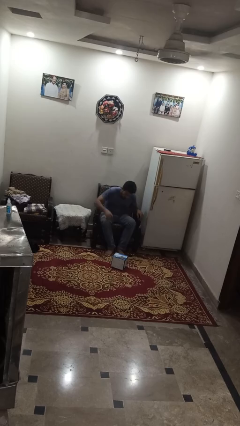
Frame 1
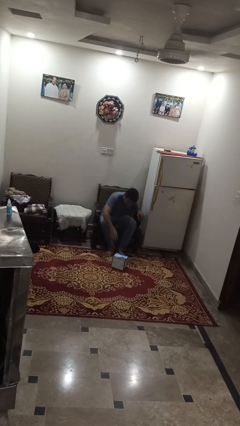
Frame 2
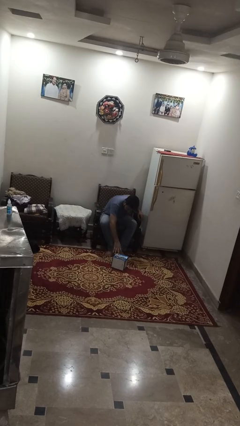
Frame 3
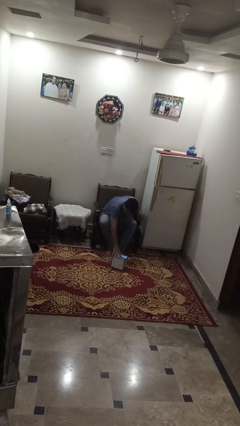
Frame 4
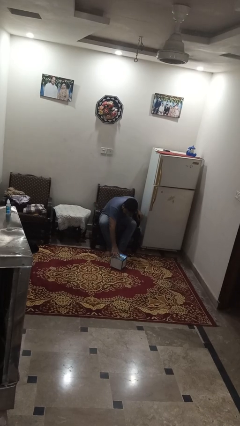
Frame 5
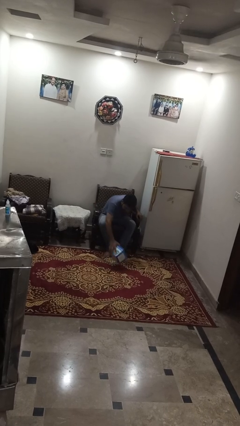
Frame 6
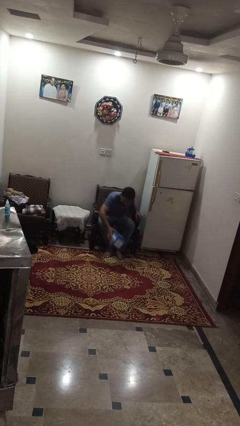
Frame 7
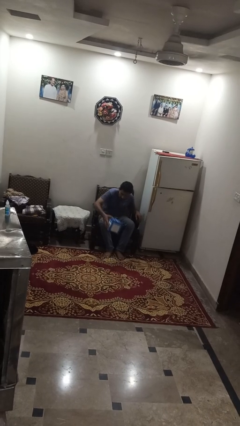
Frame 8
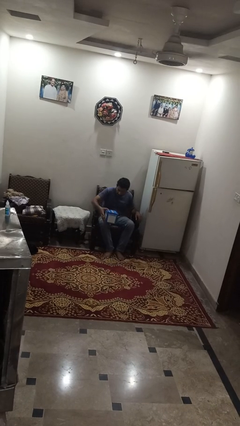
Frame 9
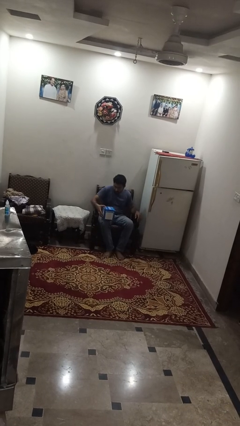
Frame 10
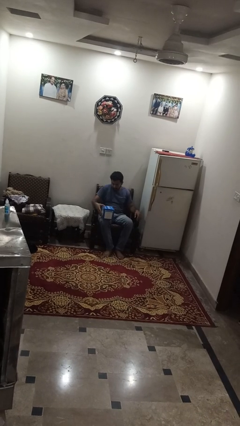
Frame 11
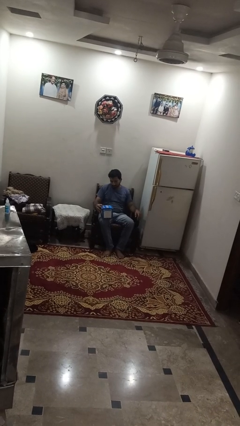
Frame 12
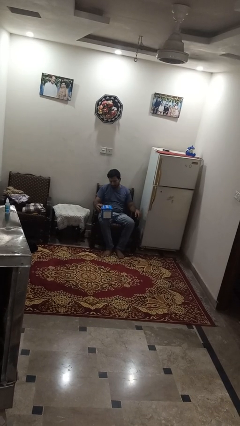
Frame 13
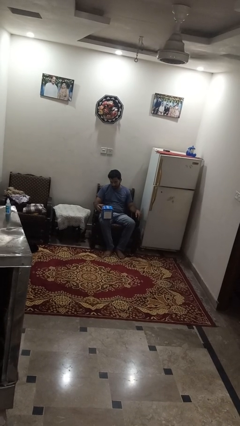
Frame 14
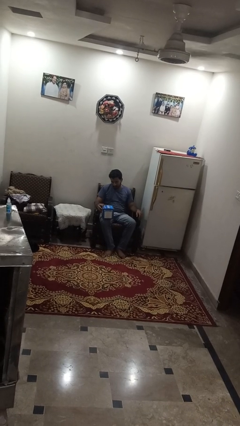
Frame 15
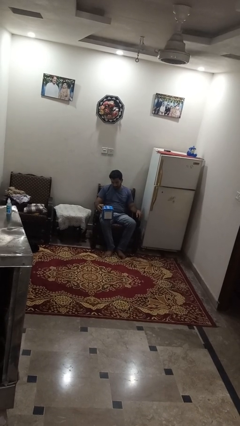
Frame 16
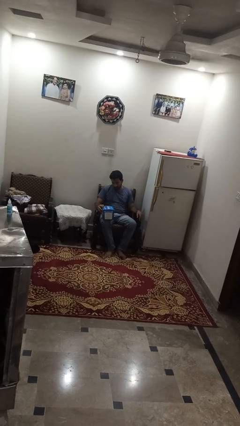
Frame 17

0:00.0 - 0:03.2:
person picks up object from floor

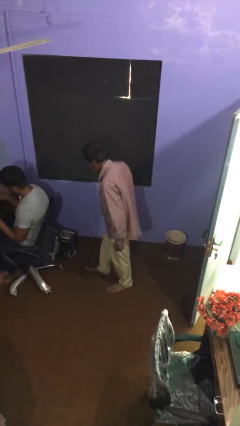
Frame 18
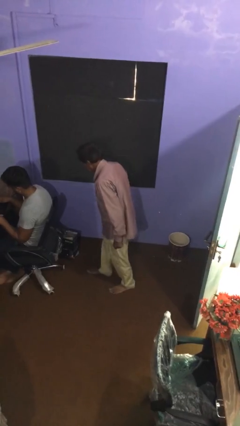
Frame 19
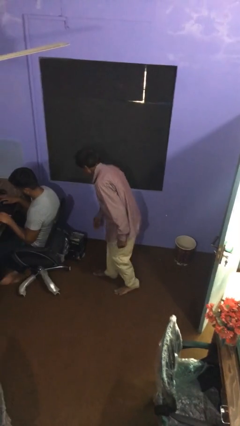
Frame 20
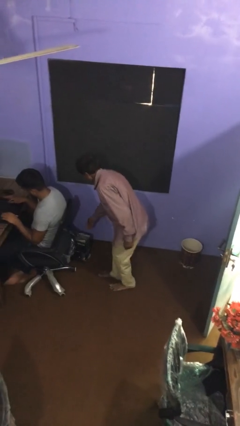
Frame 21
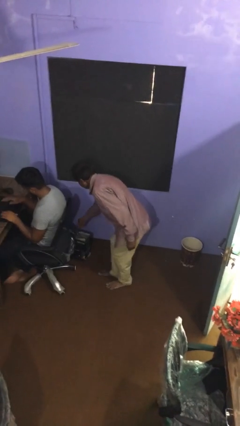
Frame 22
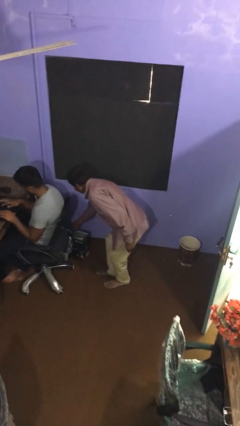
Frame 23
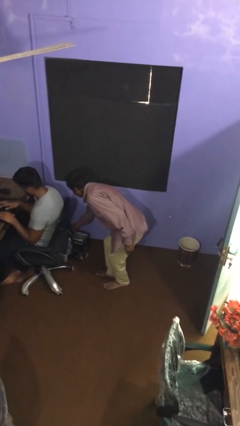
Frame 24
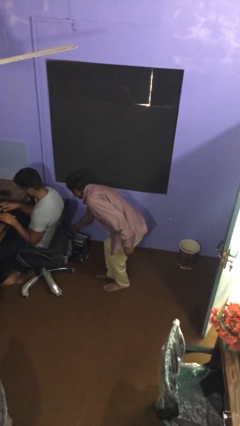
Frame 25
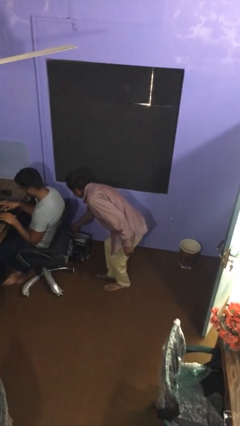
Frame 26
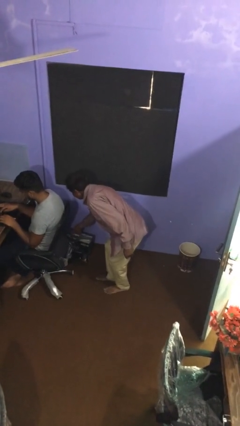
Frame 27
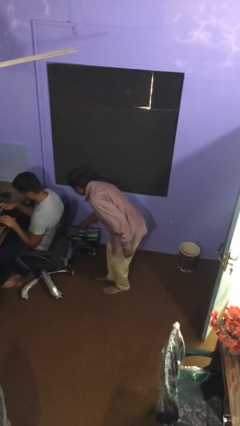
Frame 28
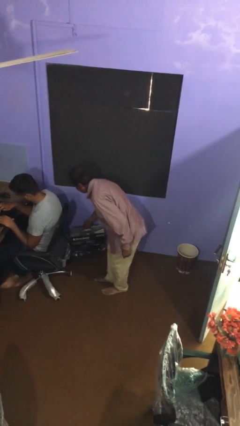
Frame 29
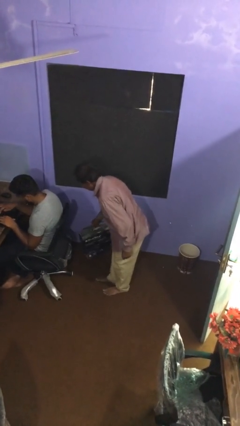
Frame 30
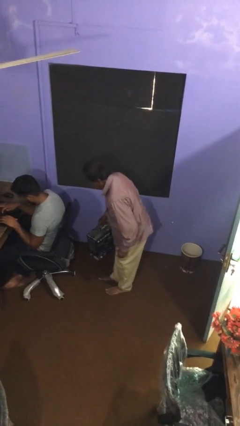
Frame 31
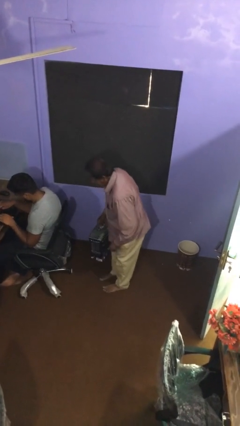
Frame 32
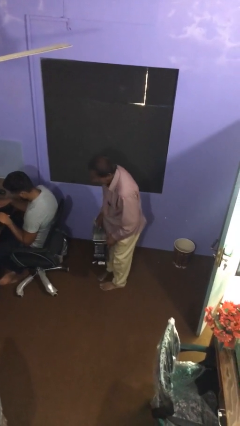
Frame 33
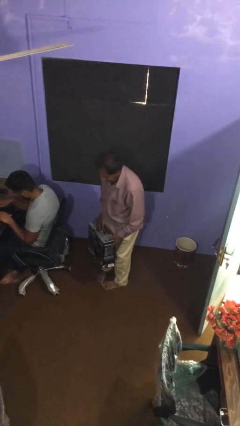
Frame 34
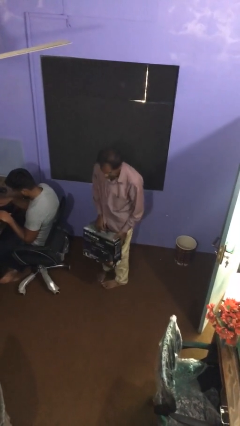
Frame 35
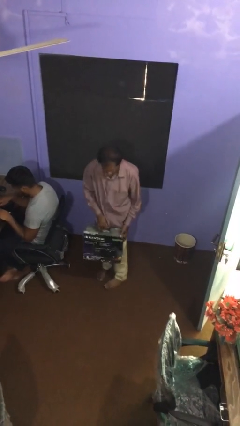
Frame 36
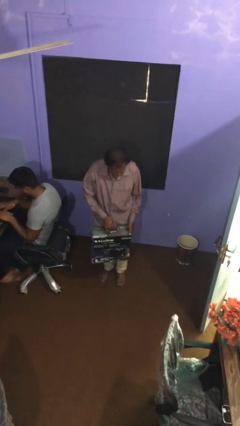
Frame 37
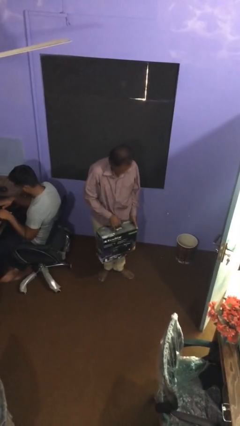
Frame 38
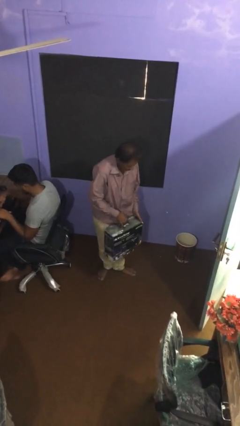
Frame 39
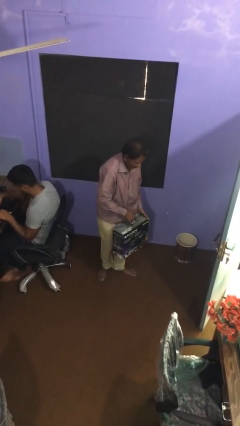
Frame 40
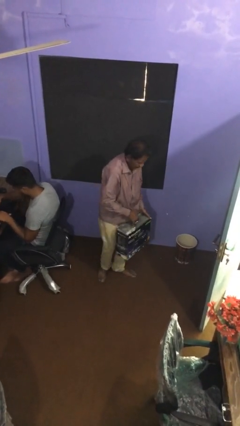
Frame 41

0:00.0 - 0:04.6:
person steals object from person

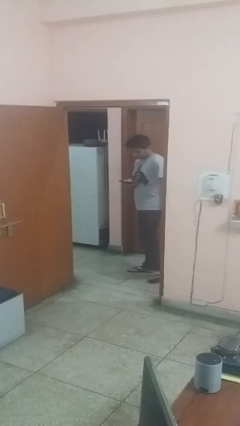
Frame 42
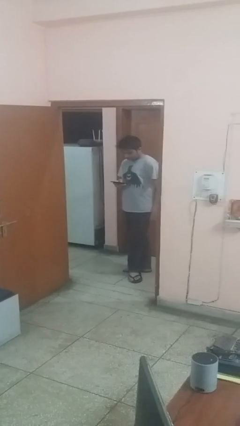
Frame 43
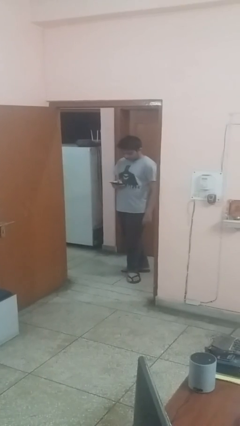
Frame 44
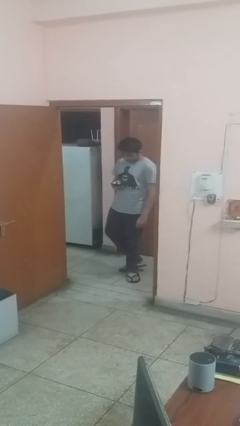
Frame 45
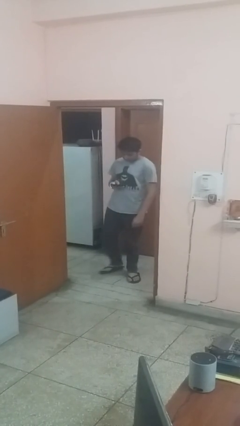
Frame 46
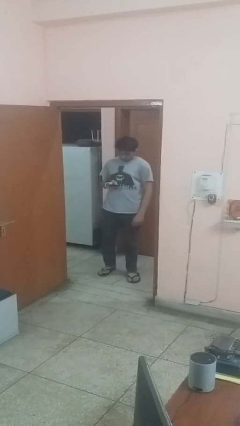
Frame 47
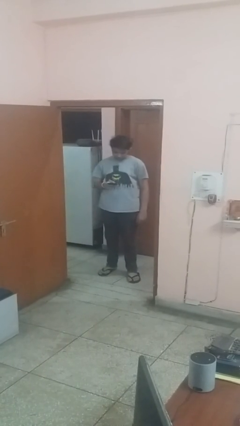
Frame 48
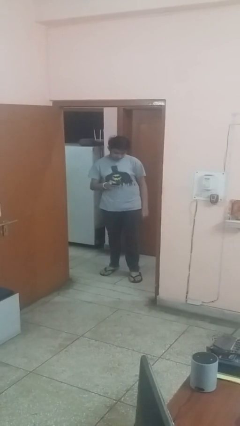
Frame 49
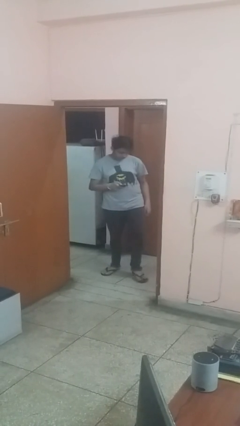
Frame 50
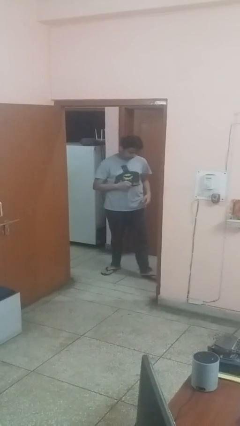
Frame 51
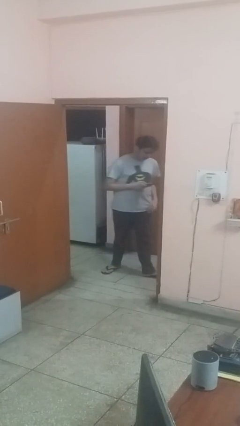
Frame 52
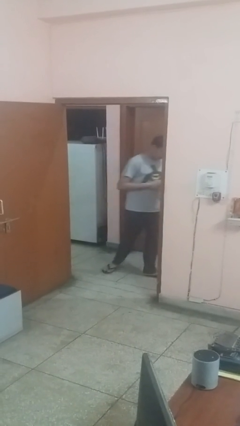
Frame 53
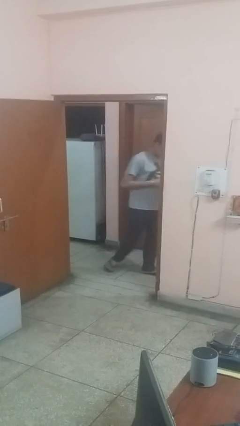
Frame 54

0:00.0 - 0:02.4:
person enters scene through structure

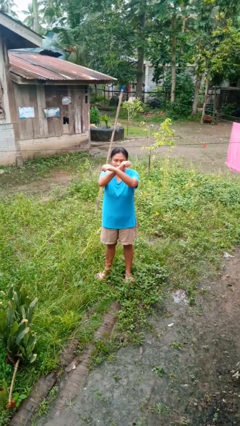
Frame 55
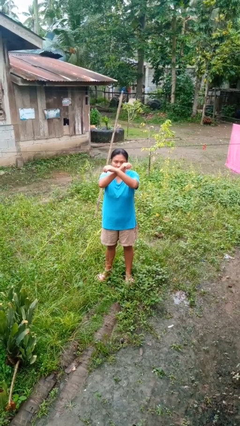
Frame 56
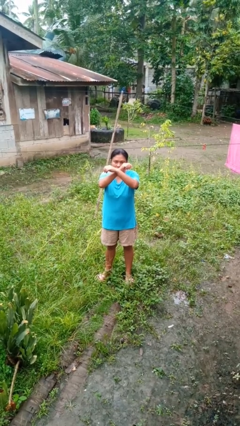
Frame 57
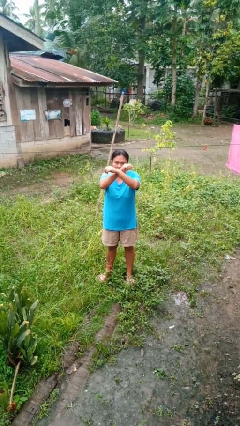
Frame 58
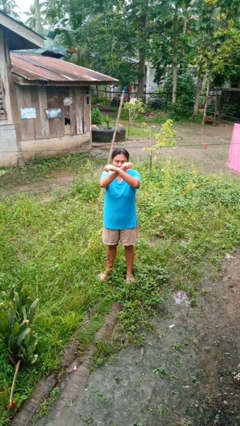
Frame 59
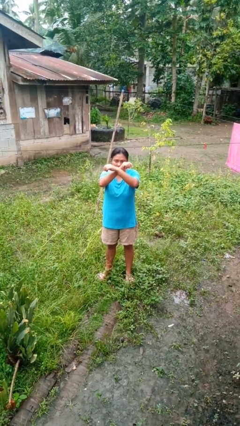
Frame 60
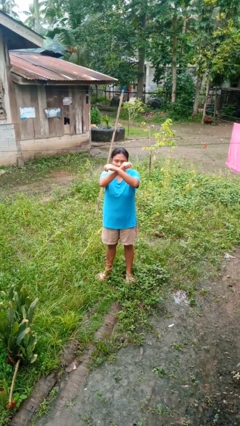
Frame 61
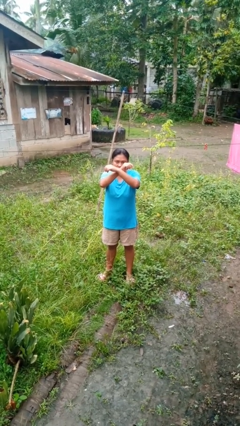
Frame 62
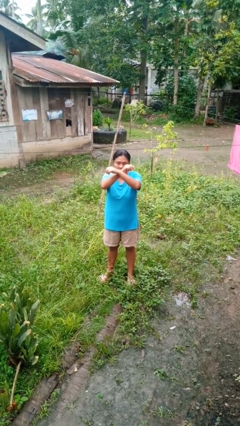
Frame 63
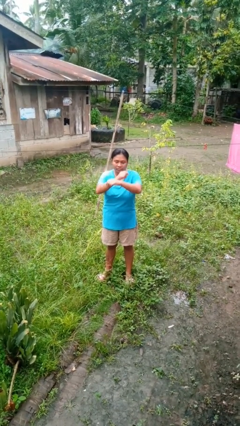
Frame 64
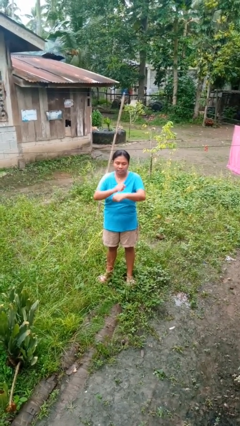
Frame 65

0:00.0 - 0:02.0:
person gestures arms x

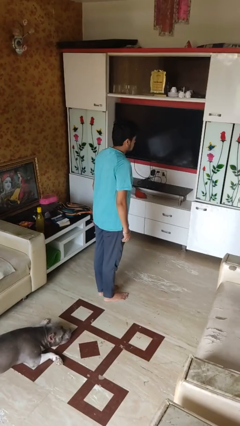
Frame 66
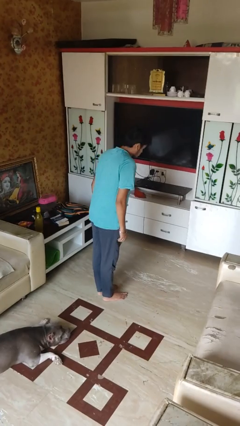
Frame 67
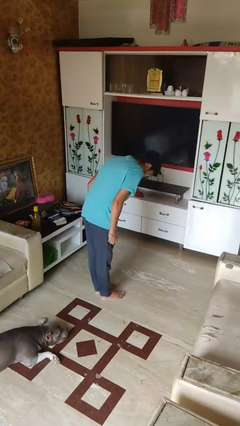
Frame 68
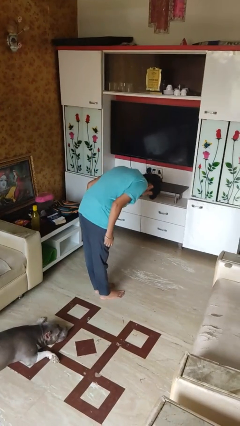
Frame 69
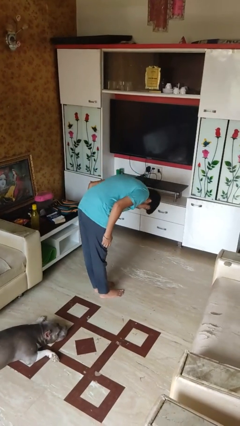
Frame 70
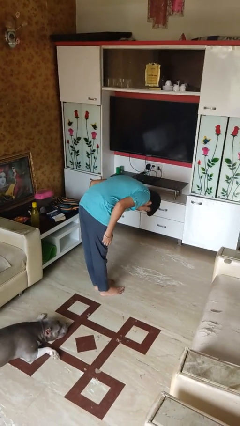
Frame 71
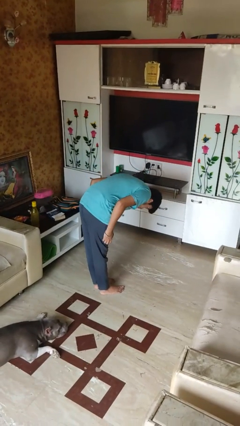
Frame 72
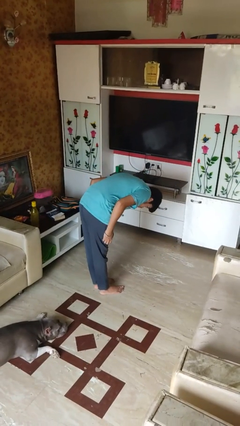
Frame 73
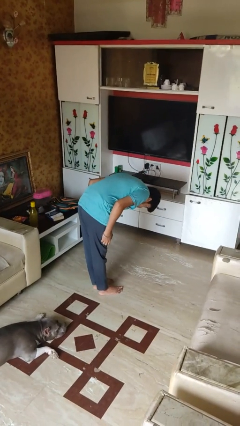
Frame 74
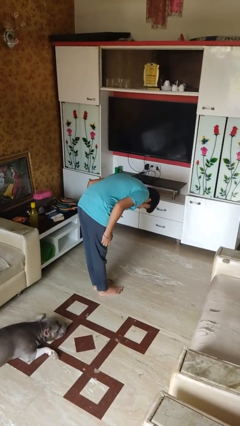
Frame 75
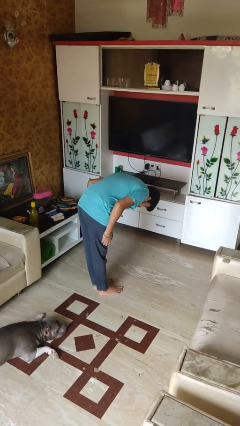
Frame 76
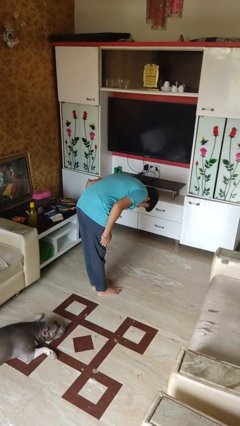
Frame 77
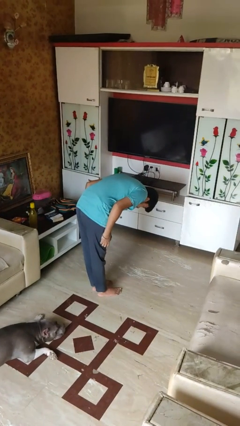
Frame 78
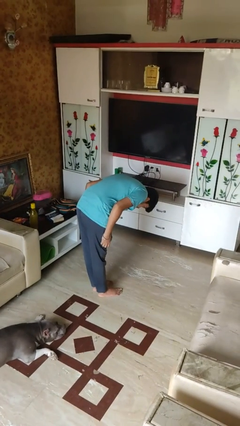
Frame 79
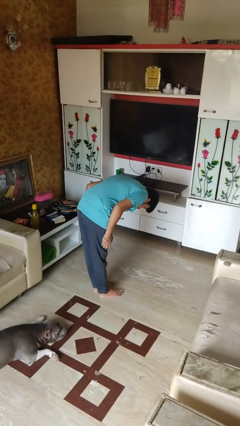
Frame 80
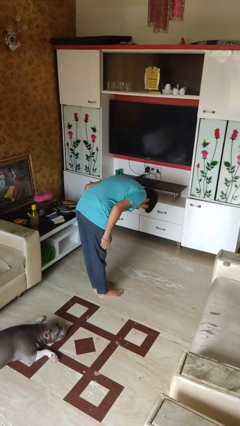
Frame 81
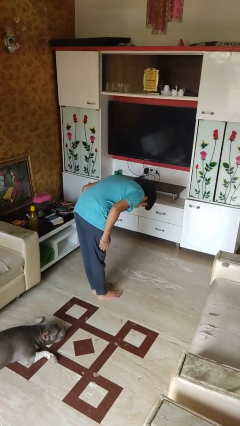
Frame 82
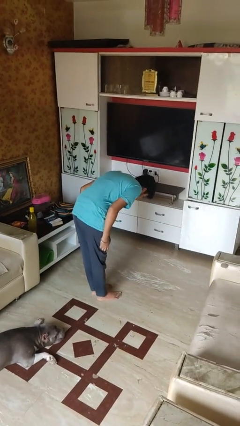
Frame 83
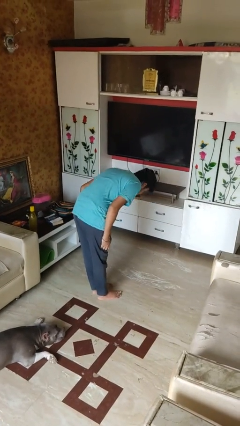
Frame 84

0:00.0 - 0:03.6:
person bows

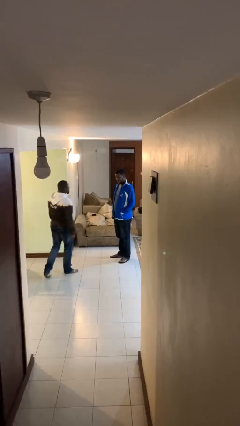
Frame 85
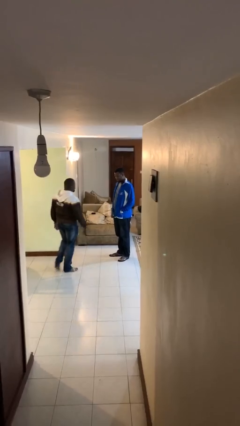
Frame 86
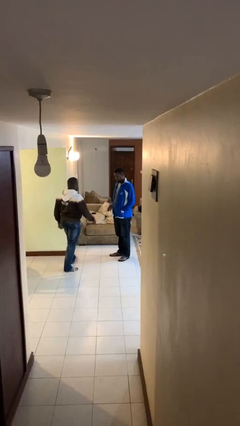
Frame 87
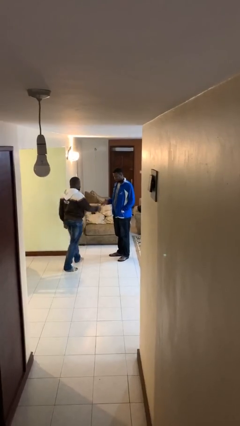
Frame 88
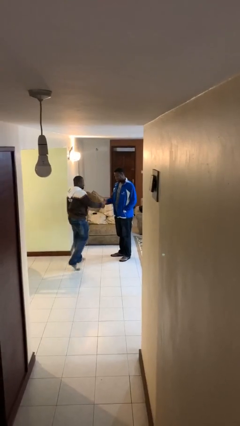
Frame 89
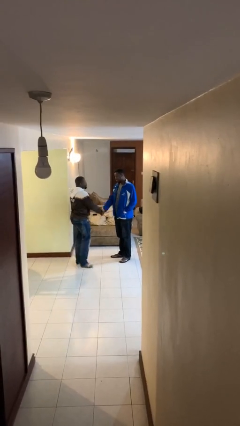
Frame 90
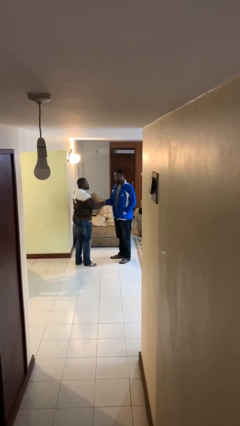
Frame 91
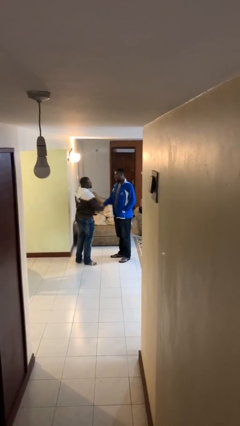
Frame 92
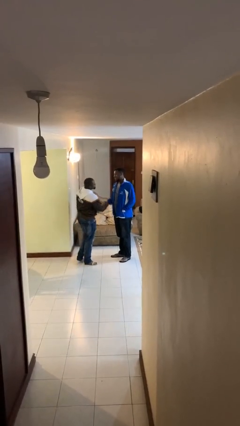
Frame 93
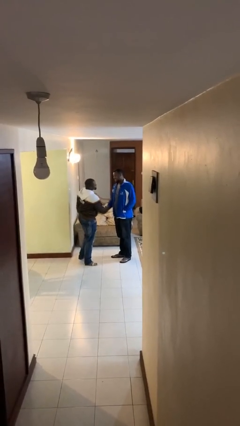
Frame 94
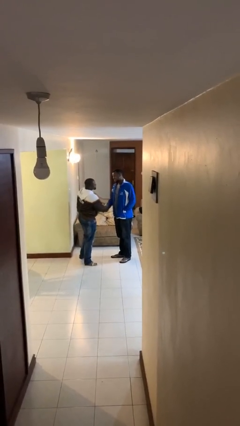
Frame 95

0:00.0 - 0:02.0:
person shakes hand
